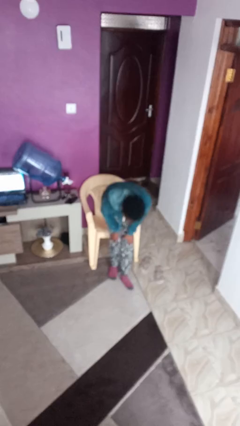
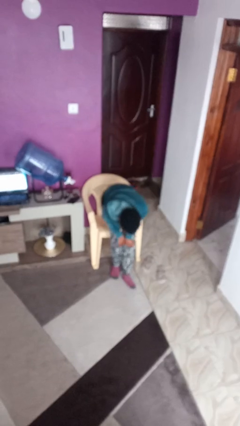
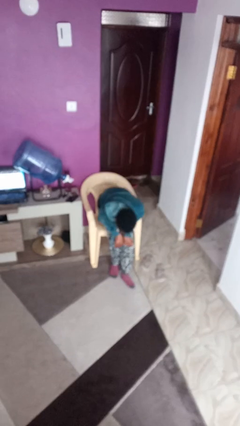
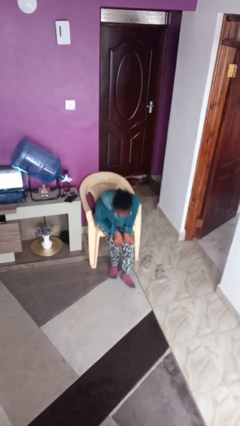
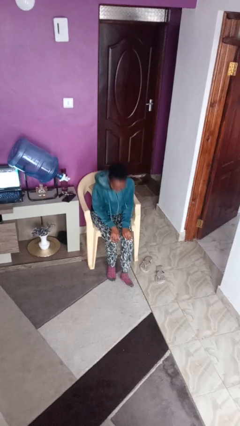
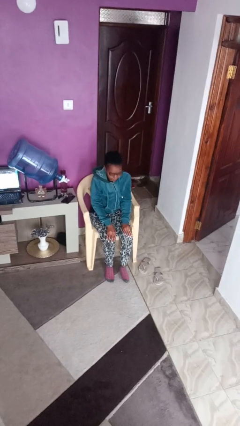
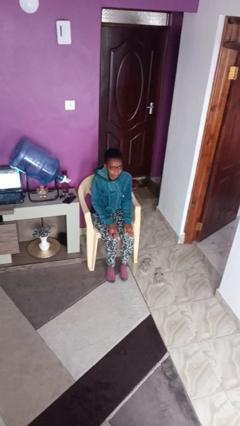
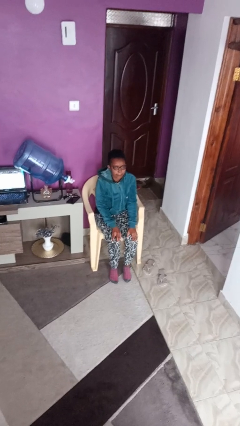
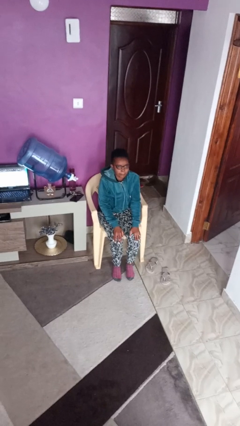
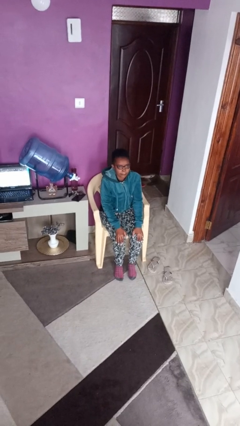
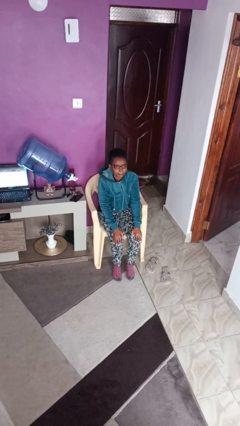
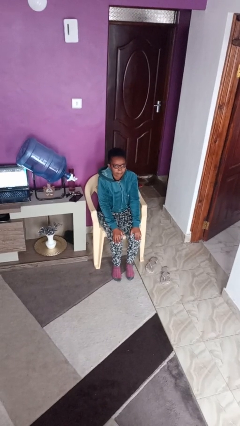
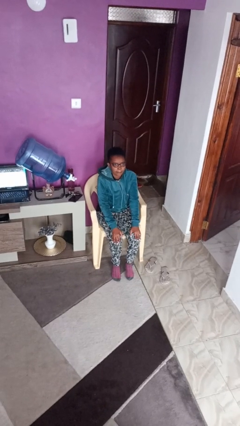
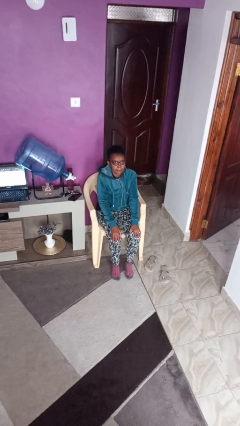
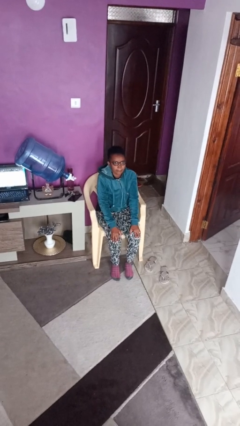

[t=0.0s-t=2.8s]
person sits down

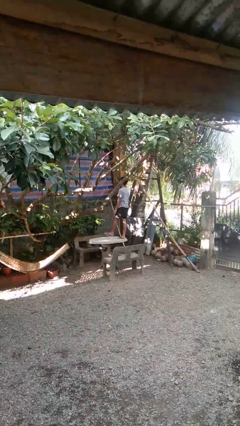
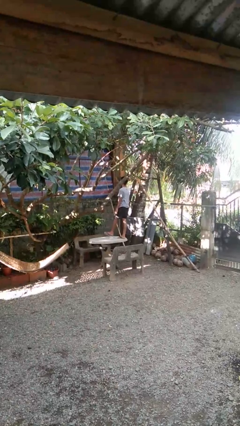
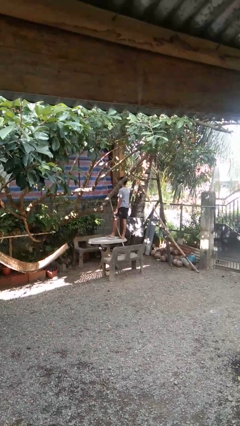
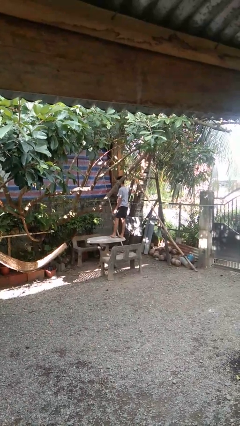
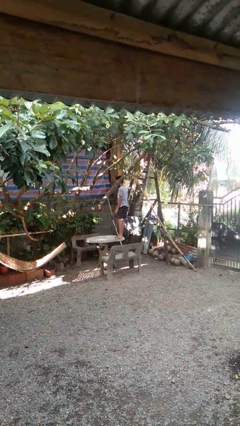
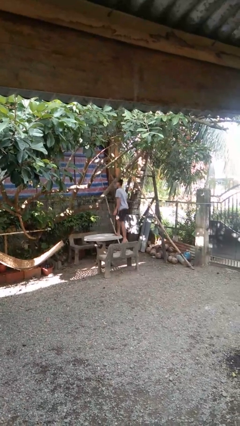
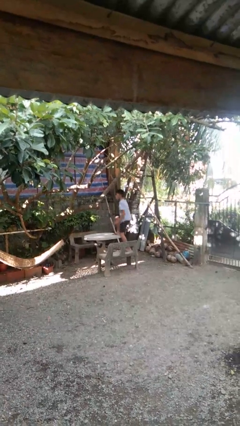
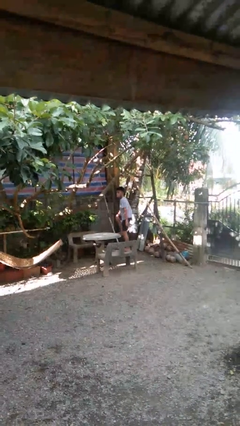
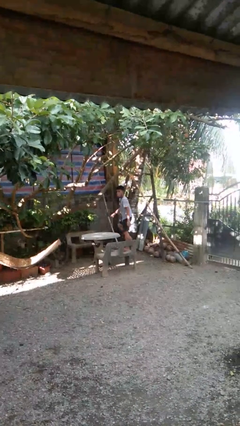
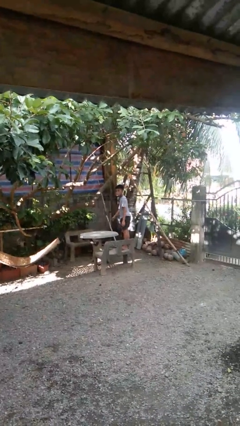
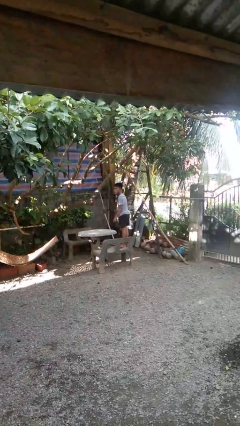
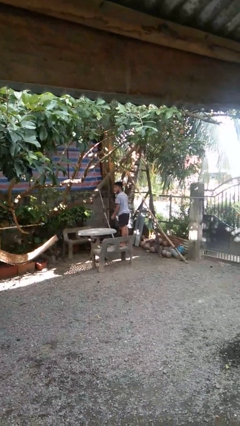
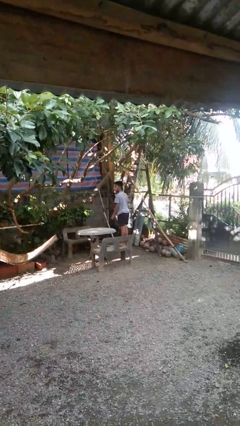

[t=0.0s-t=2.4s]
person climbs off table

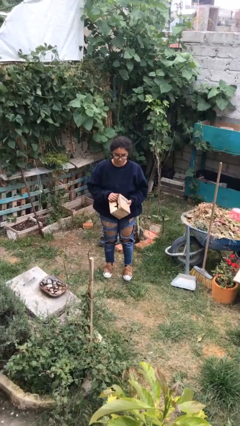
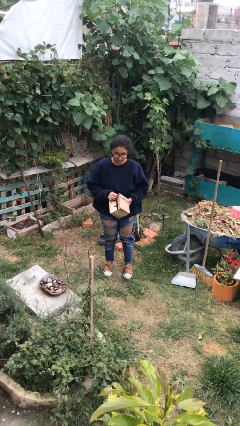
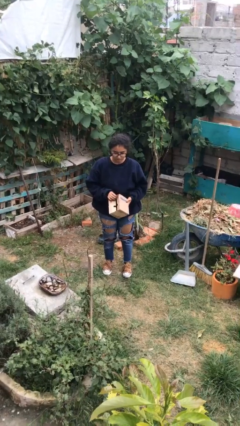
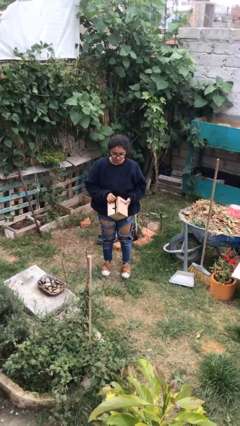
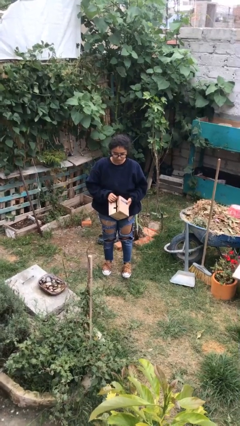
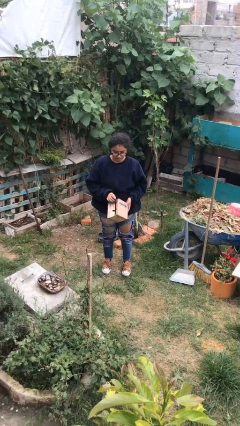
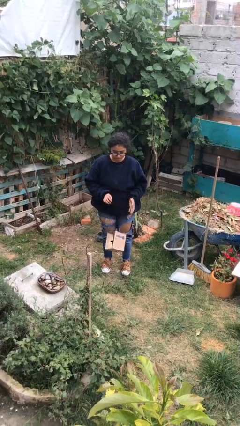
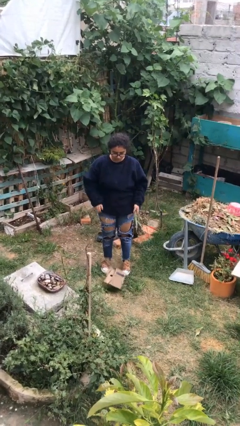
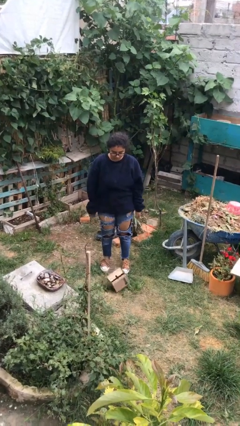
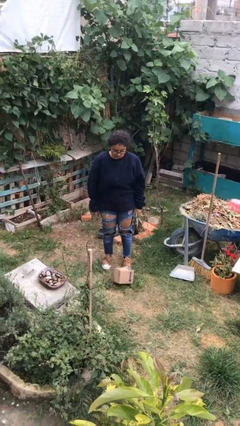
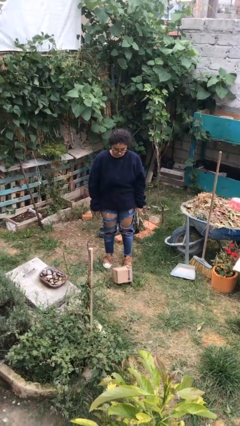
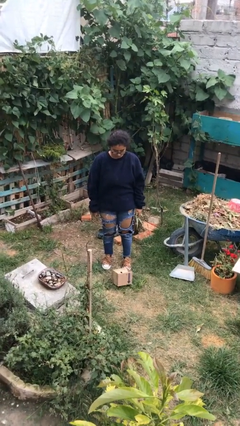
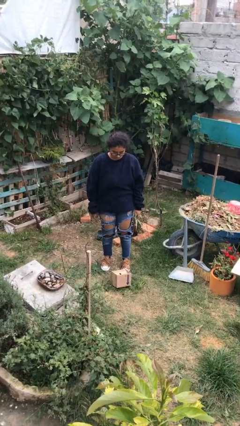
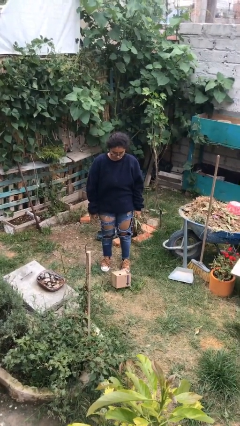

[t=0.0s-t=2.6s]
person drops object

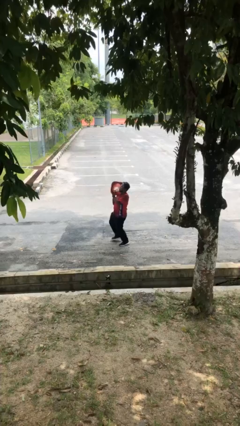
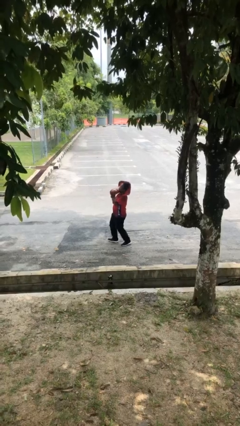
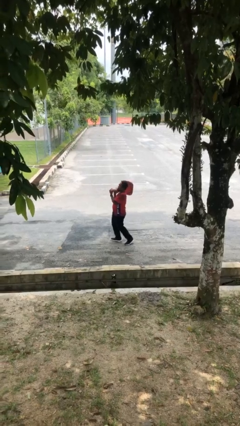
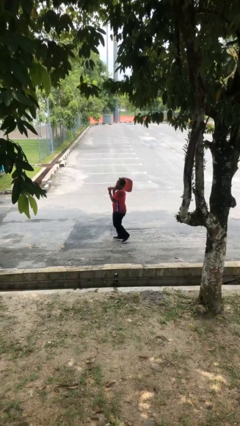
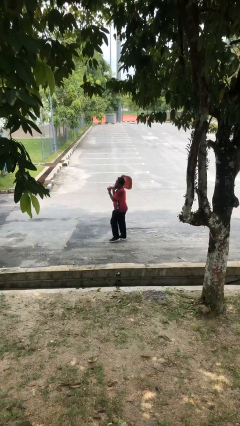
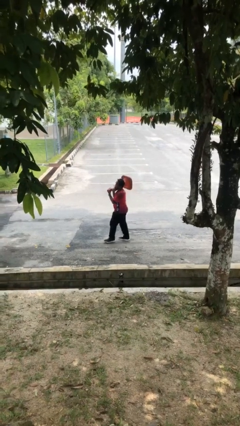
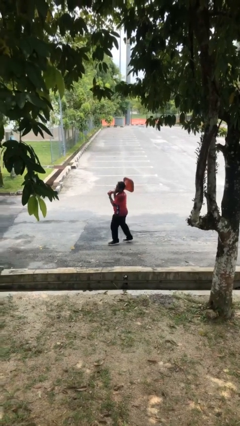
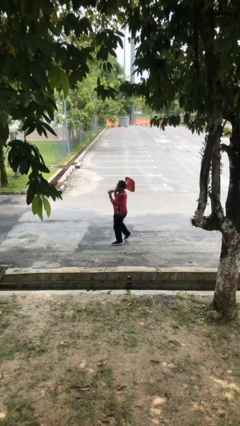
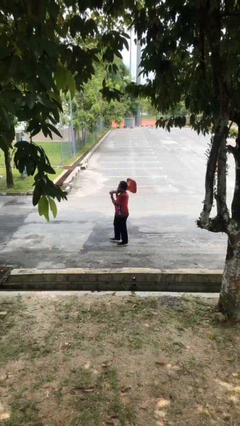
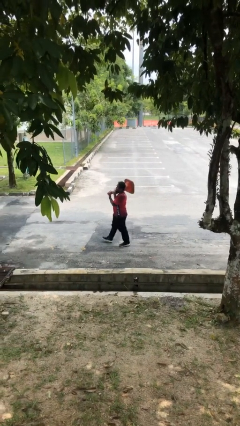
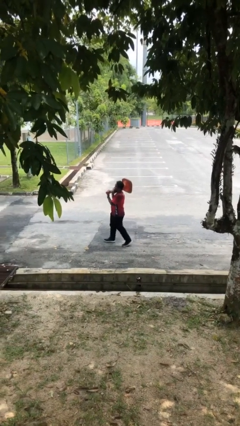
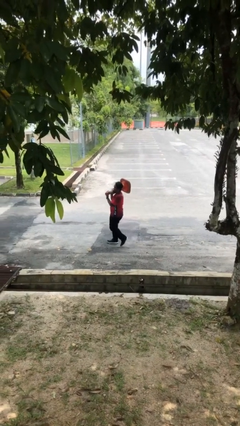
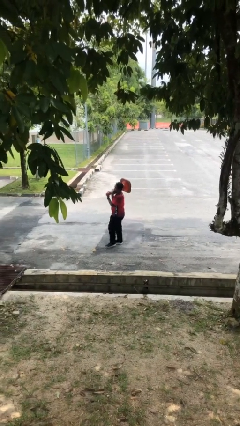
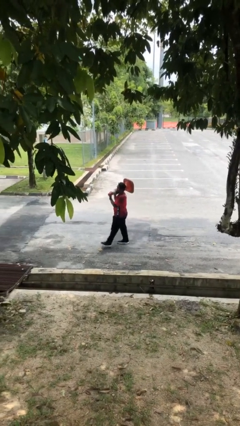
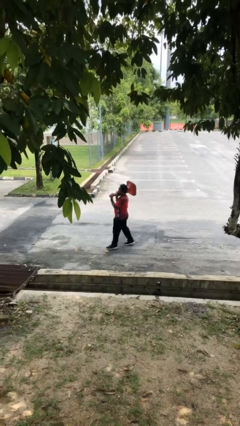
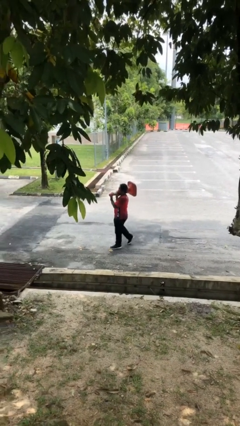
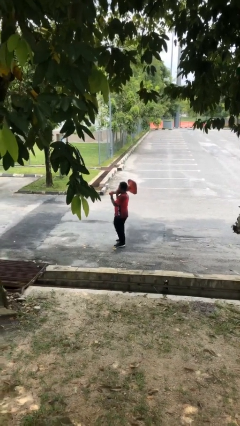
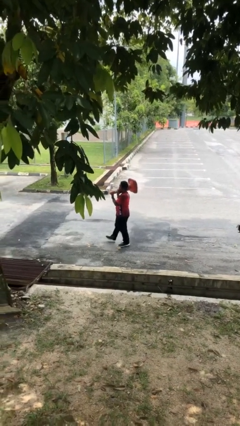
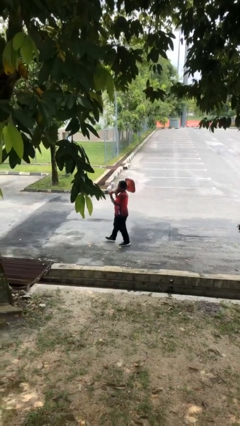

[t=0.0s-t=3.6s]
person carries heavy object

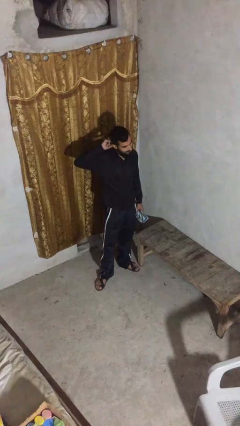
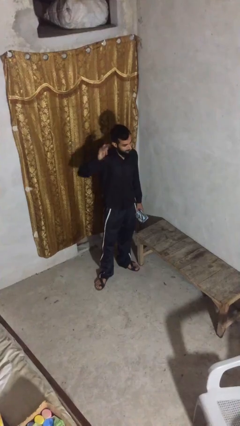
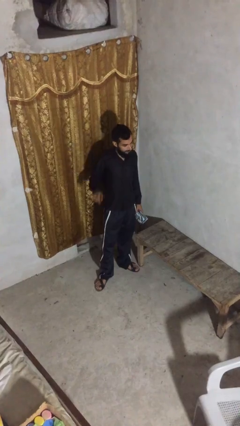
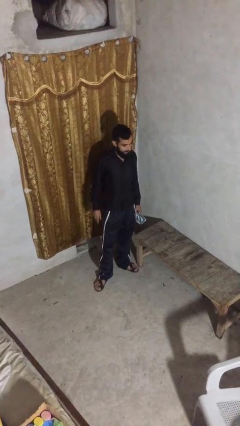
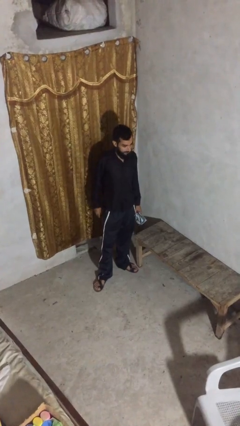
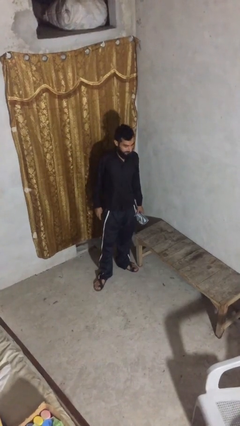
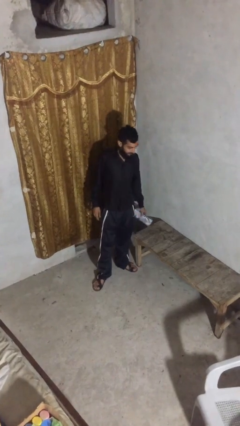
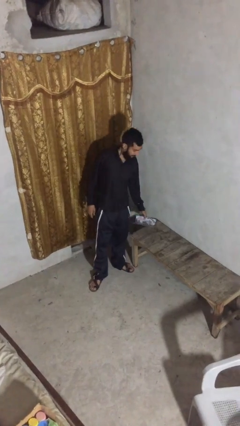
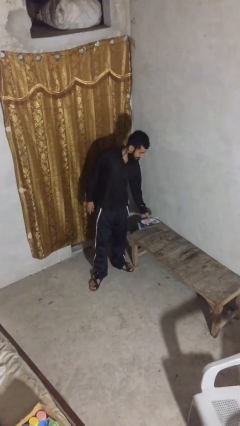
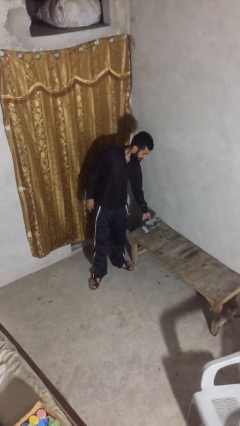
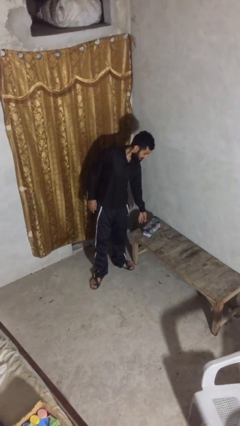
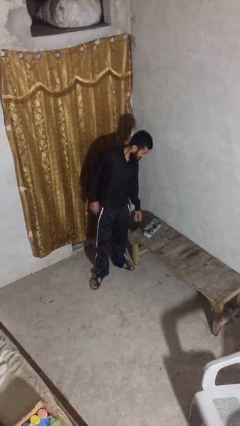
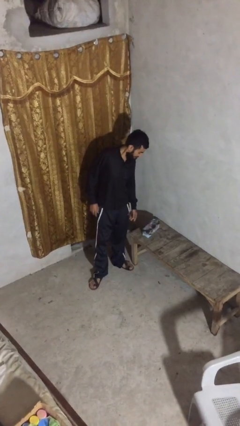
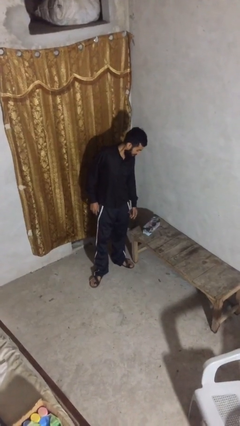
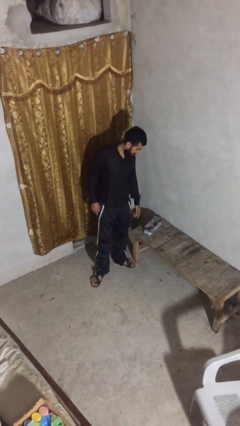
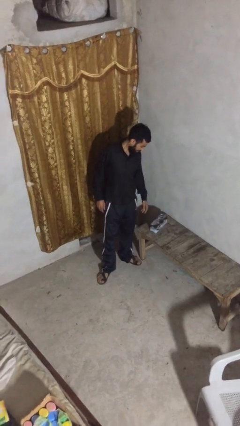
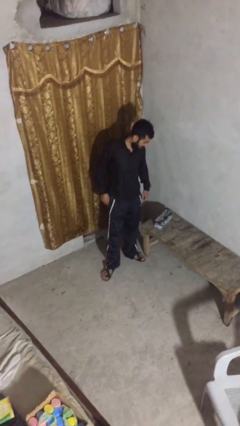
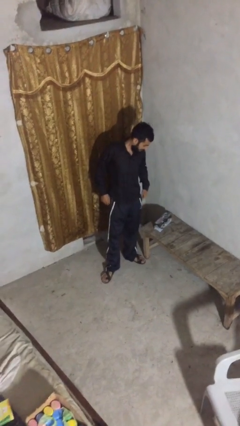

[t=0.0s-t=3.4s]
person puts down object on table

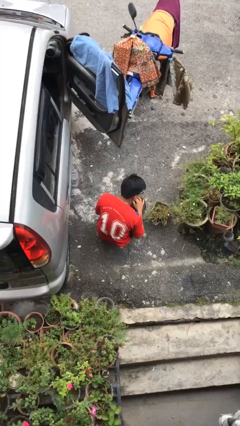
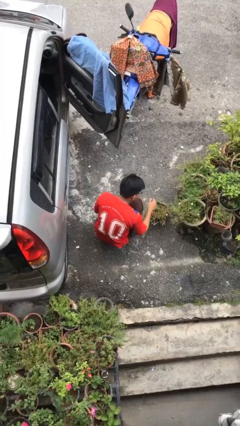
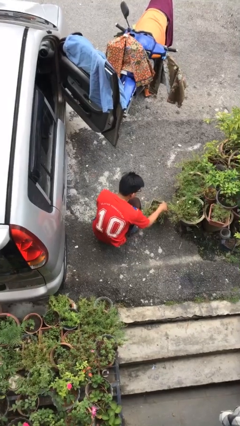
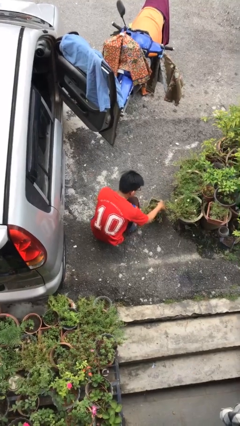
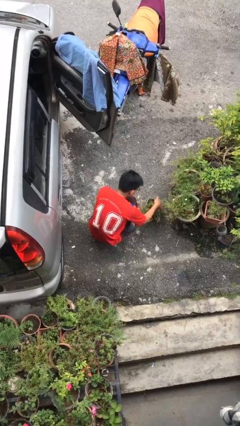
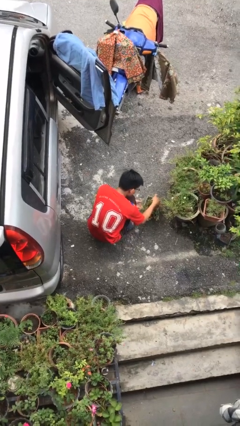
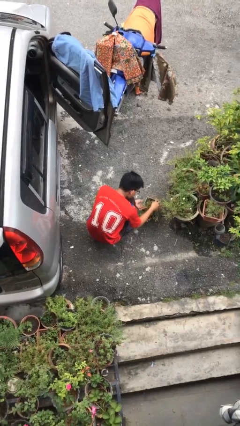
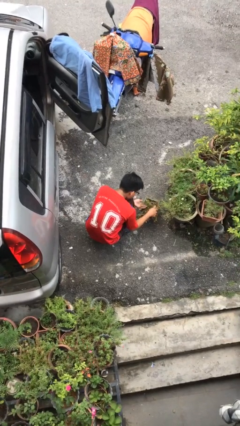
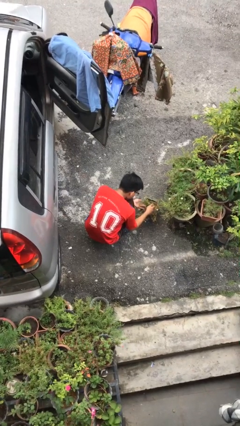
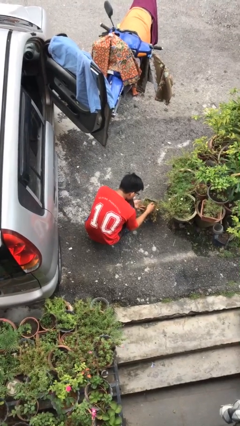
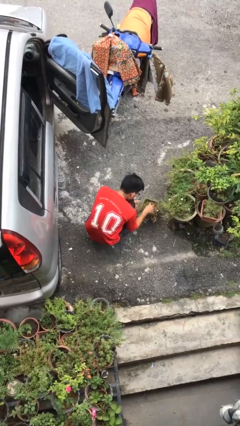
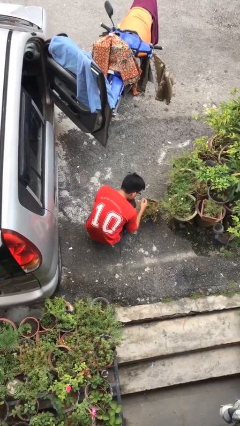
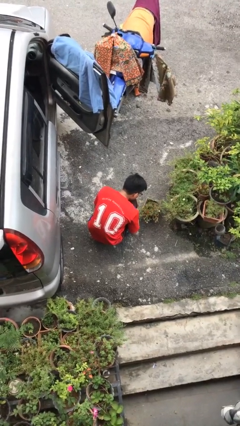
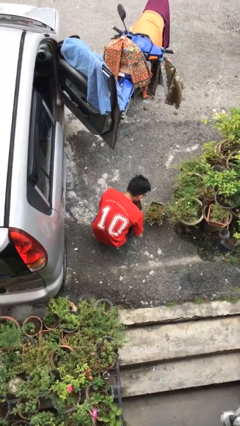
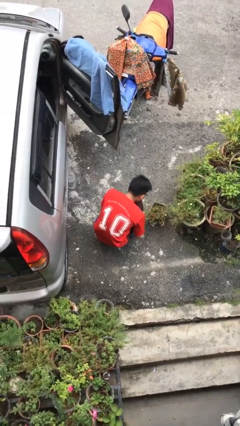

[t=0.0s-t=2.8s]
person arranges flowers in vase

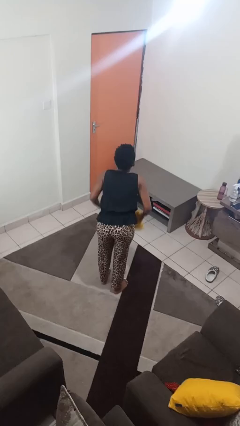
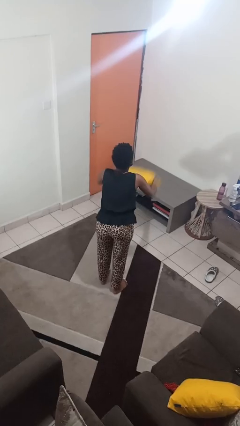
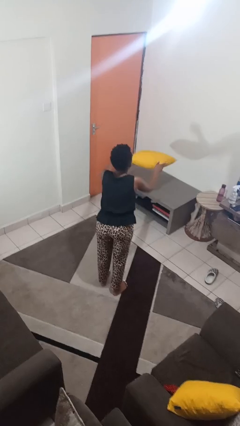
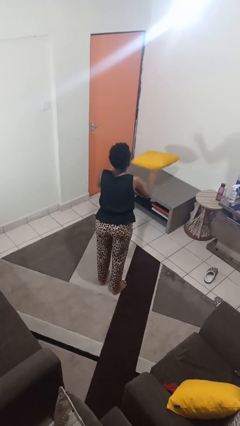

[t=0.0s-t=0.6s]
person picks up object from table
